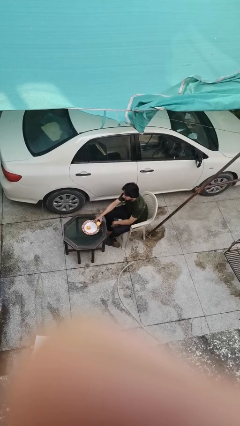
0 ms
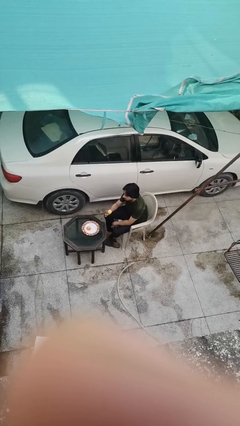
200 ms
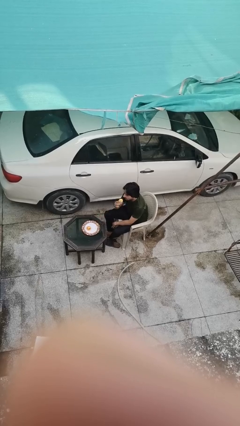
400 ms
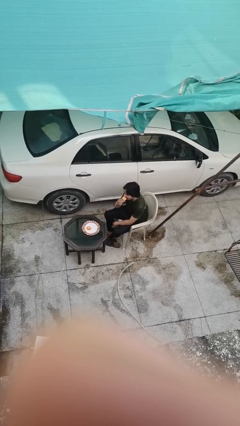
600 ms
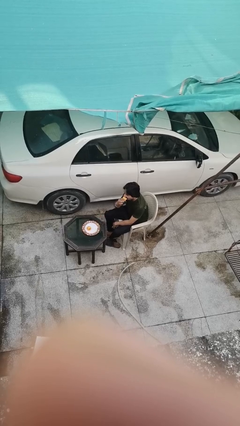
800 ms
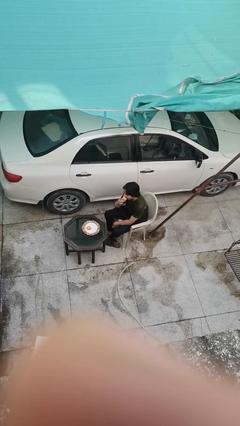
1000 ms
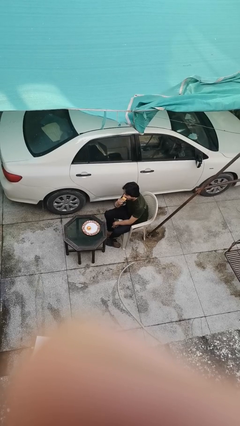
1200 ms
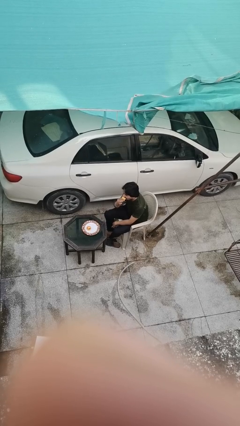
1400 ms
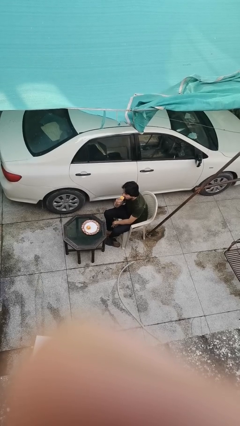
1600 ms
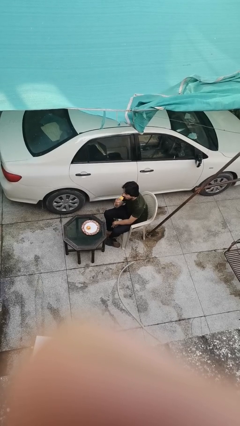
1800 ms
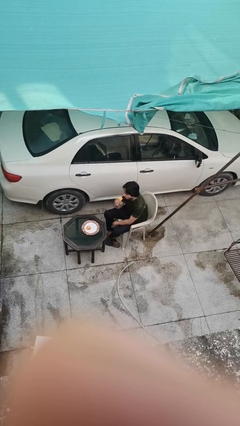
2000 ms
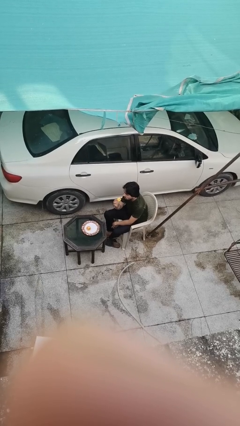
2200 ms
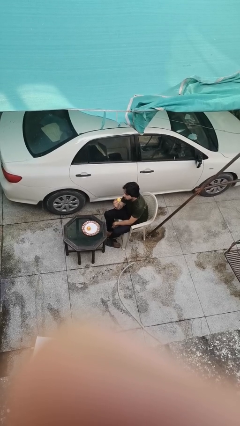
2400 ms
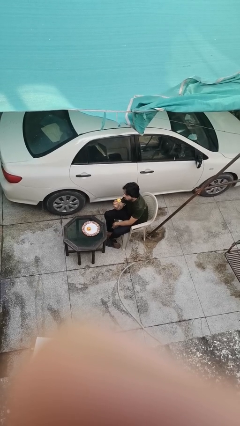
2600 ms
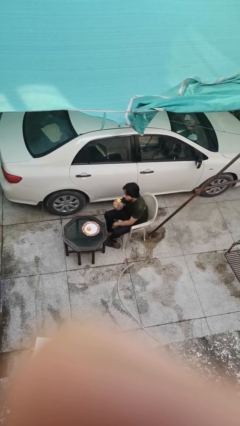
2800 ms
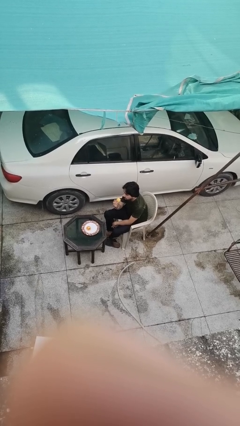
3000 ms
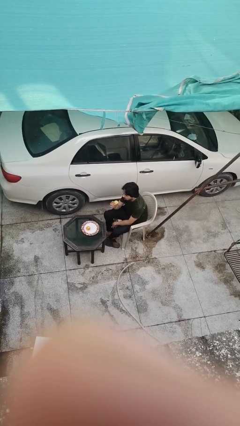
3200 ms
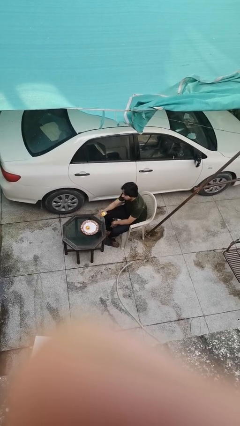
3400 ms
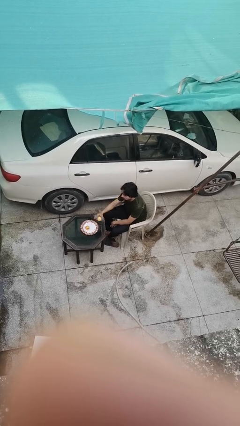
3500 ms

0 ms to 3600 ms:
person eats with hands

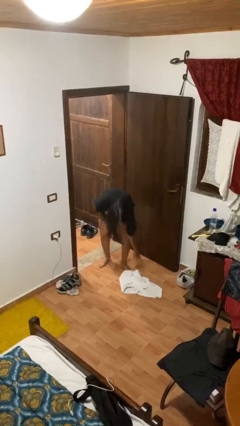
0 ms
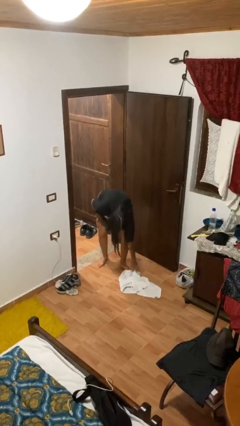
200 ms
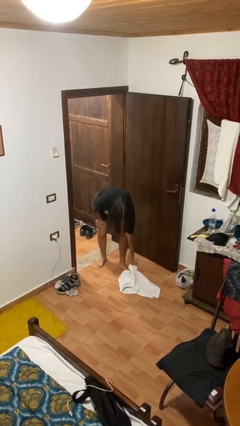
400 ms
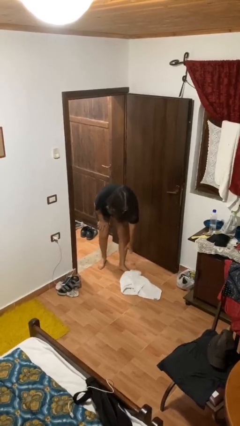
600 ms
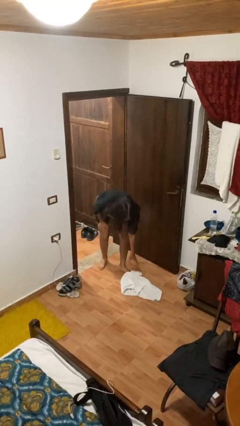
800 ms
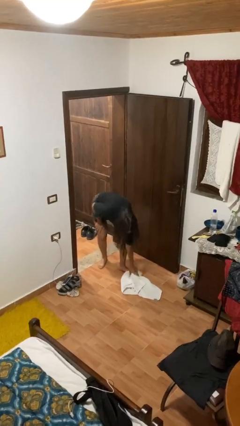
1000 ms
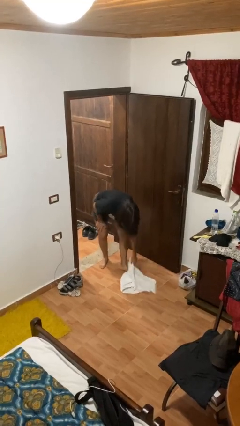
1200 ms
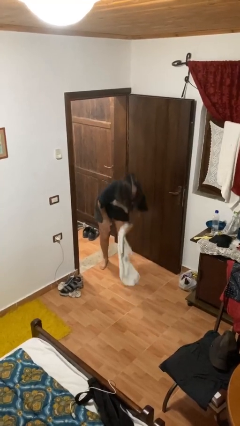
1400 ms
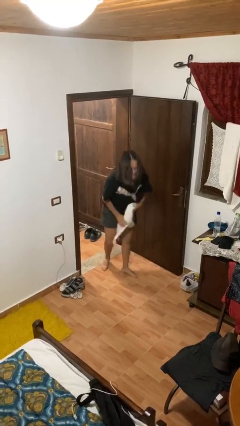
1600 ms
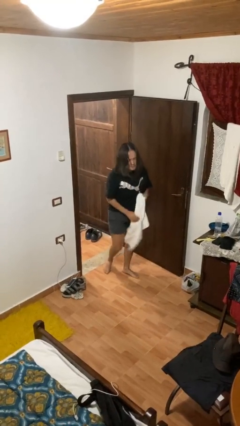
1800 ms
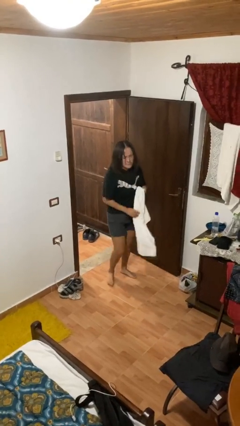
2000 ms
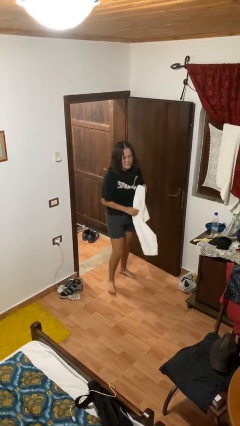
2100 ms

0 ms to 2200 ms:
person picks up object from floor

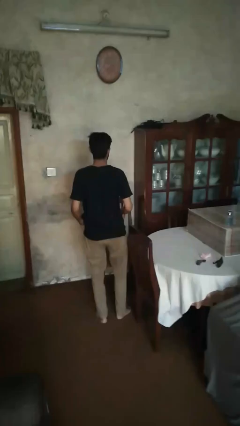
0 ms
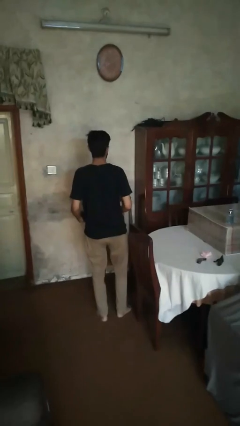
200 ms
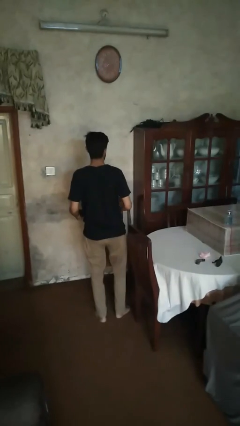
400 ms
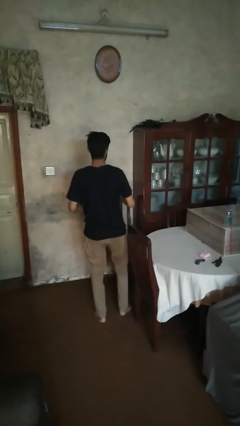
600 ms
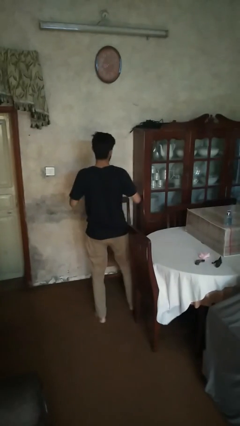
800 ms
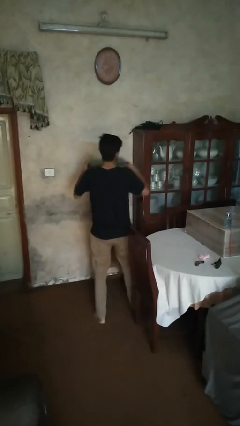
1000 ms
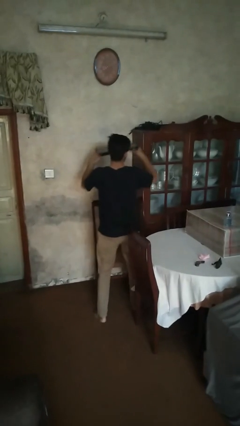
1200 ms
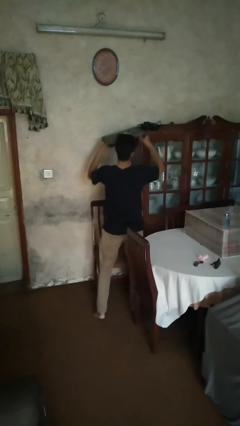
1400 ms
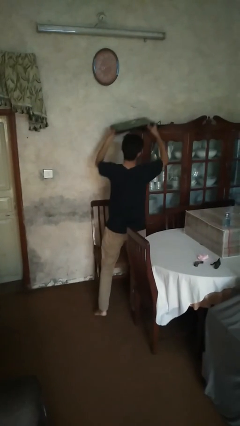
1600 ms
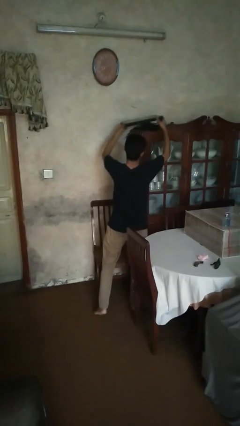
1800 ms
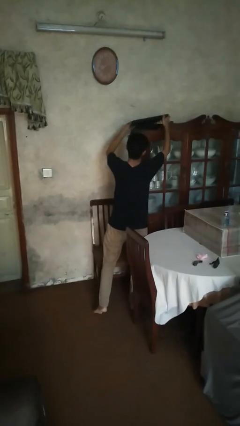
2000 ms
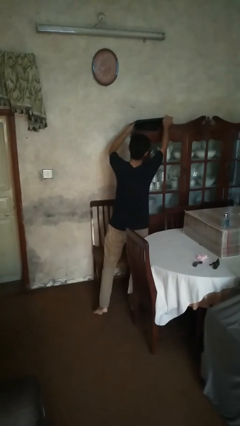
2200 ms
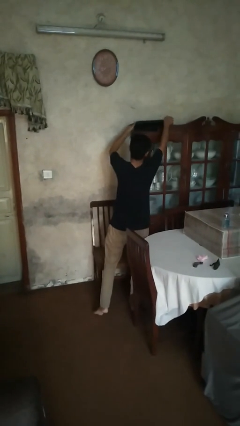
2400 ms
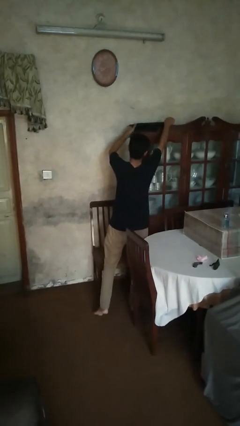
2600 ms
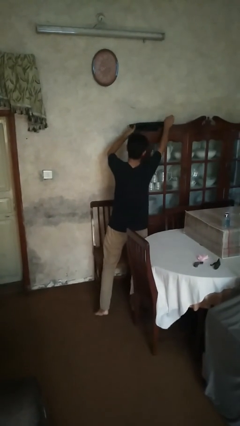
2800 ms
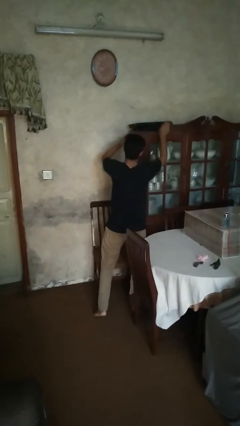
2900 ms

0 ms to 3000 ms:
person puts down object into cabinet

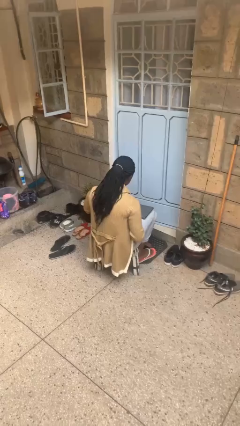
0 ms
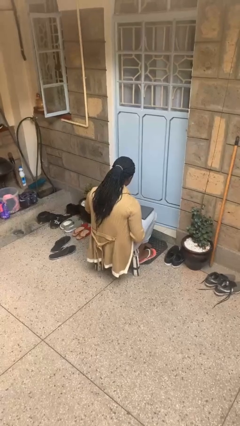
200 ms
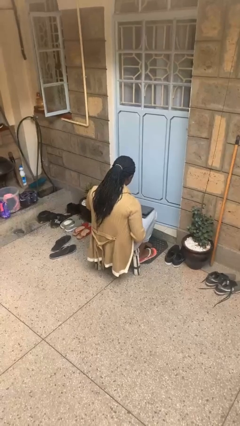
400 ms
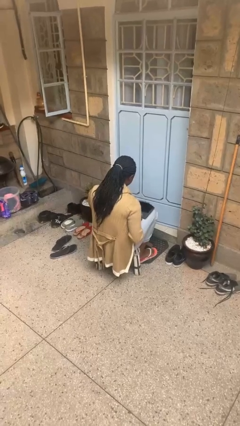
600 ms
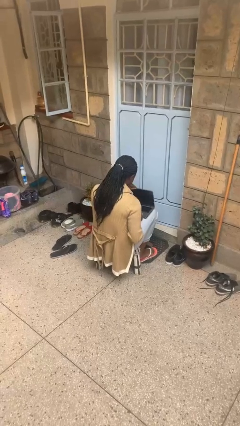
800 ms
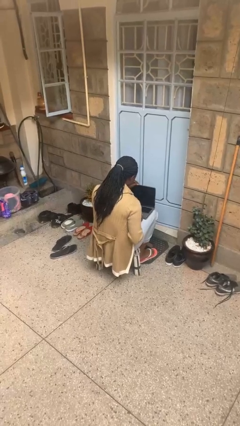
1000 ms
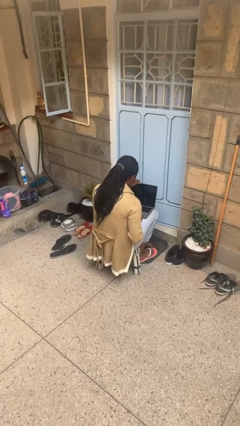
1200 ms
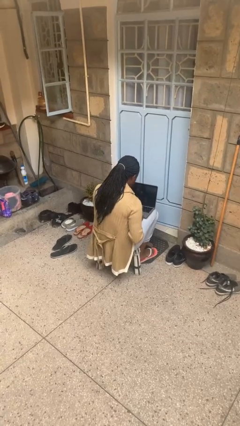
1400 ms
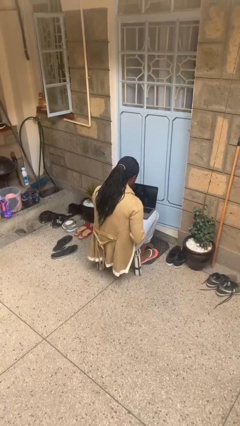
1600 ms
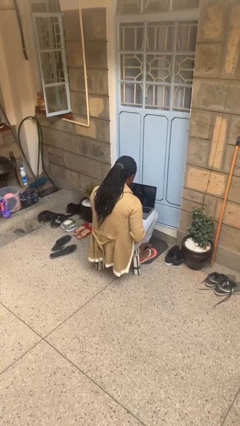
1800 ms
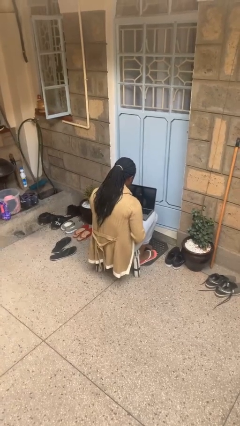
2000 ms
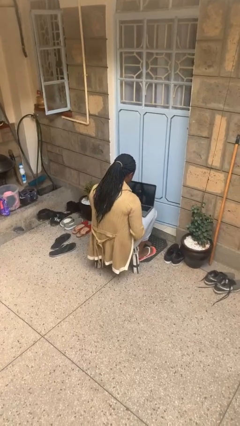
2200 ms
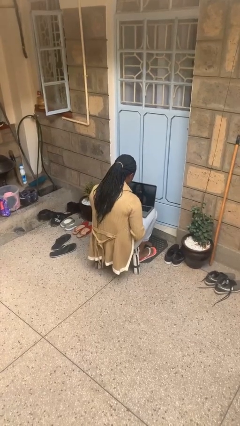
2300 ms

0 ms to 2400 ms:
person opens laptop

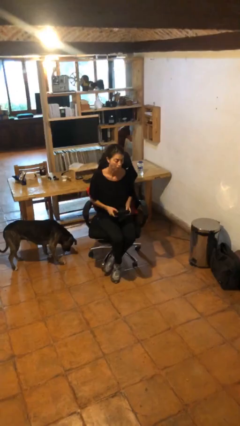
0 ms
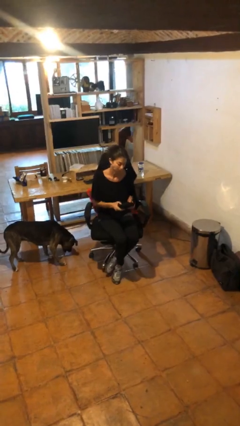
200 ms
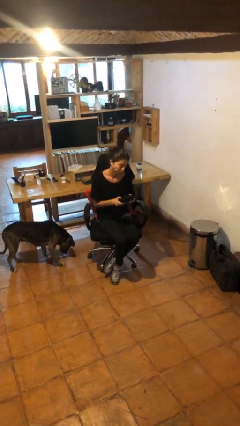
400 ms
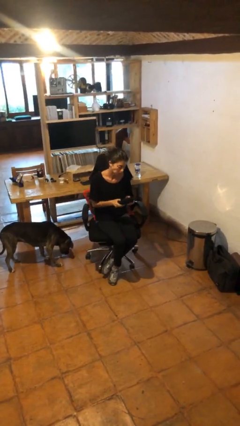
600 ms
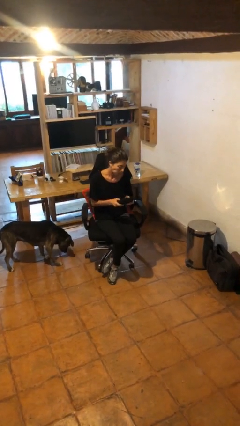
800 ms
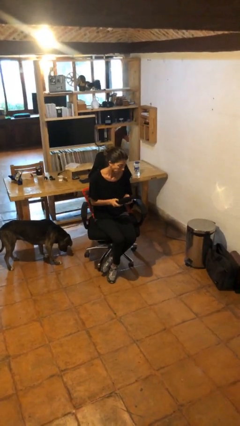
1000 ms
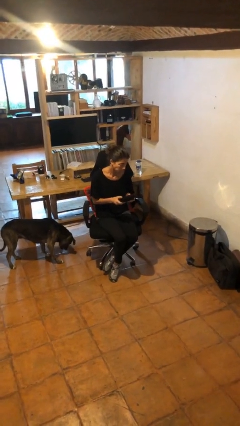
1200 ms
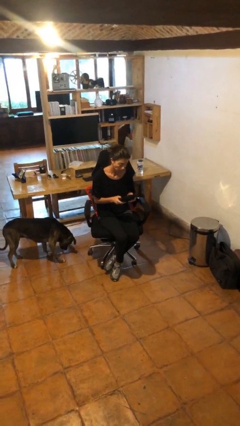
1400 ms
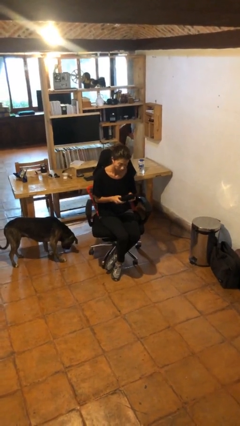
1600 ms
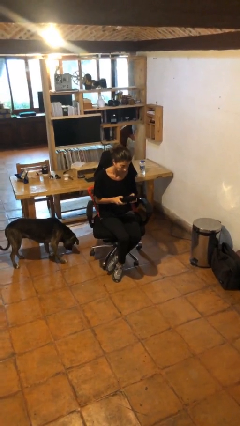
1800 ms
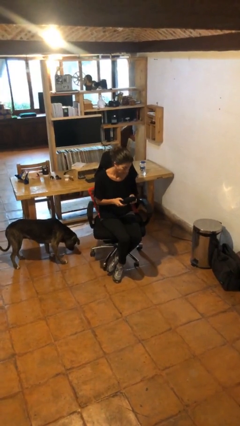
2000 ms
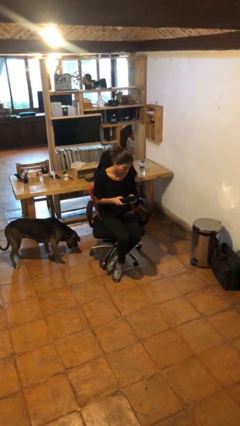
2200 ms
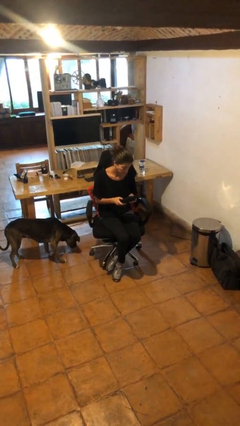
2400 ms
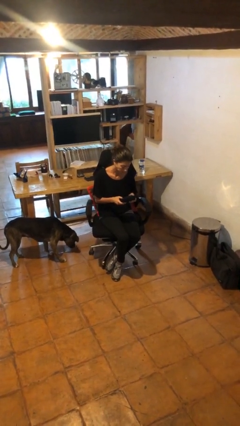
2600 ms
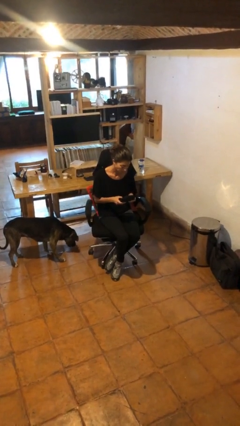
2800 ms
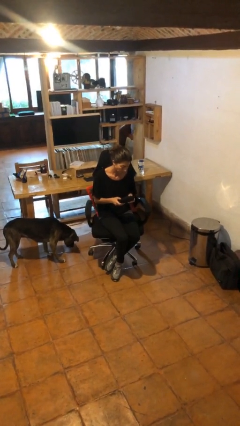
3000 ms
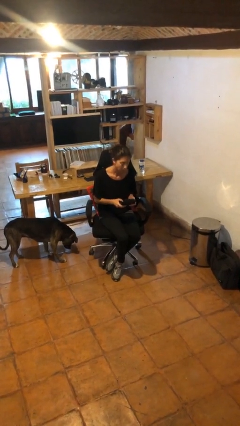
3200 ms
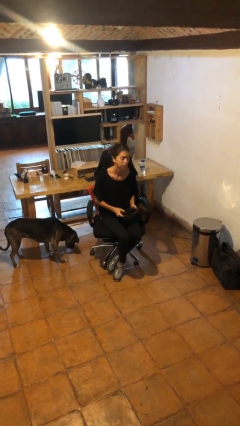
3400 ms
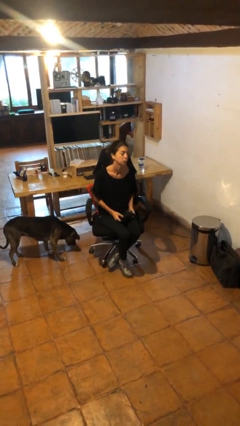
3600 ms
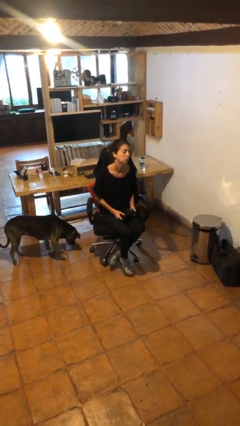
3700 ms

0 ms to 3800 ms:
person interacts with handheld game

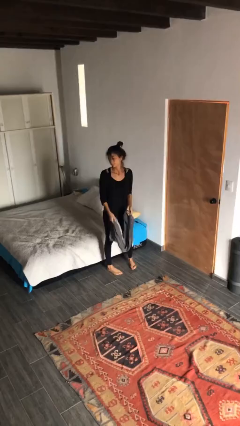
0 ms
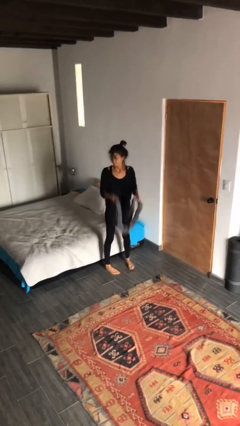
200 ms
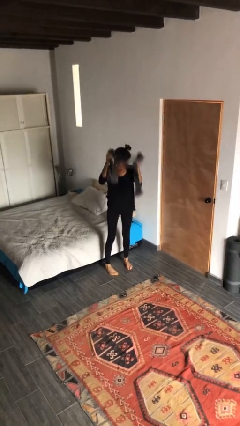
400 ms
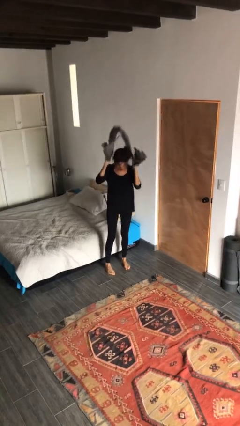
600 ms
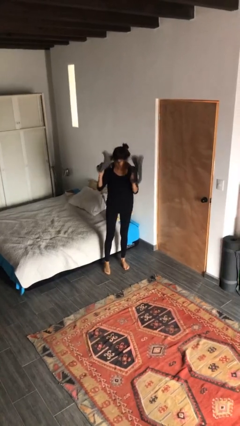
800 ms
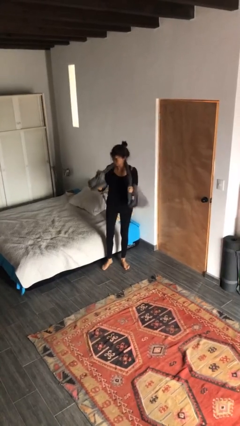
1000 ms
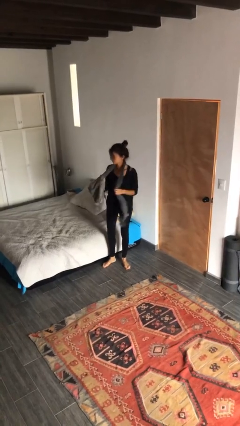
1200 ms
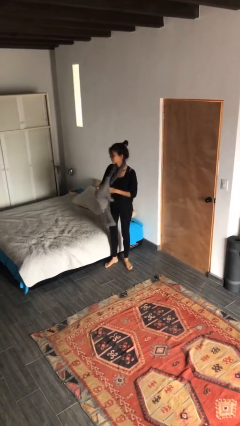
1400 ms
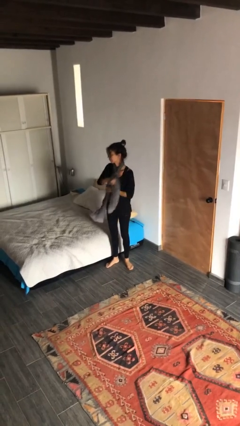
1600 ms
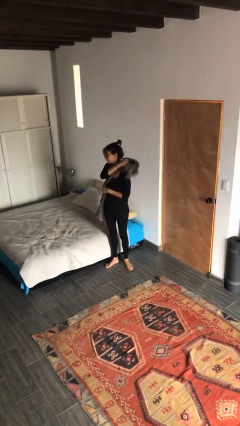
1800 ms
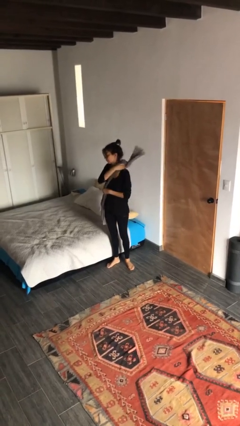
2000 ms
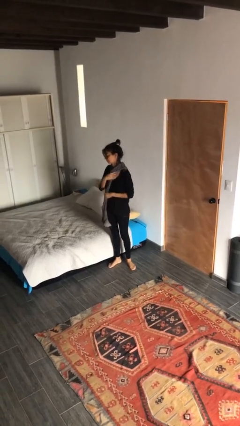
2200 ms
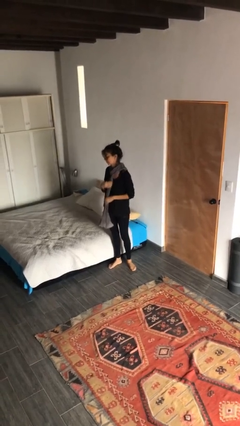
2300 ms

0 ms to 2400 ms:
person puts on scarf
